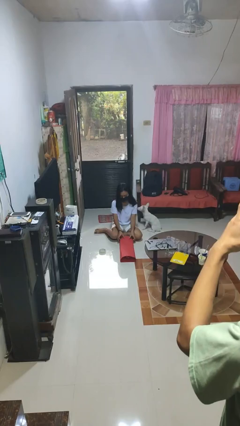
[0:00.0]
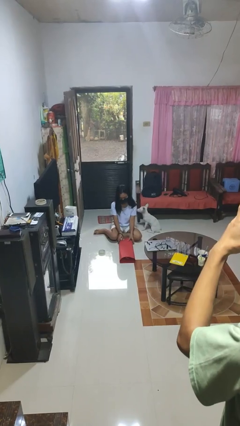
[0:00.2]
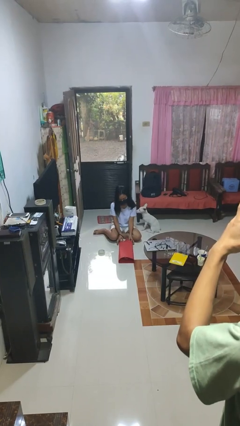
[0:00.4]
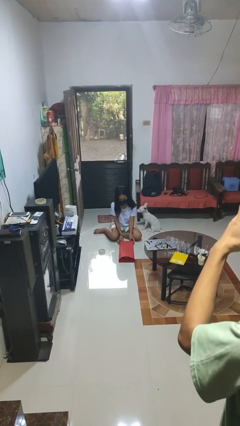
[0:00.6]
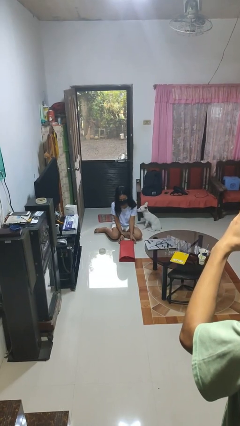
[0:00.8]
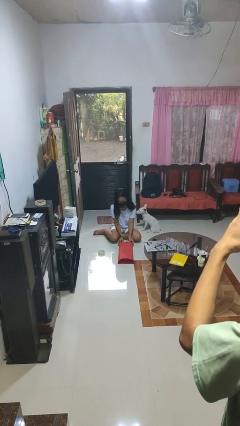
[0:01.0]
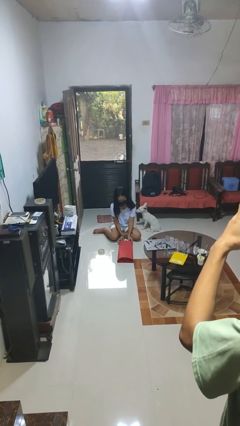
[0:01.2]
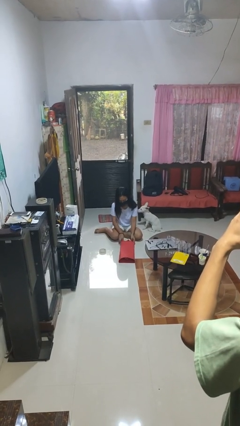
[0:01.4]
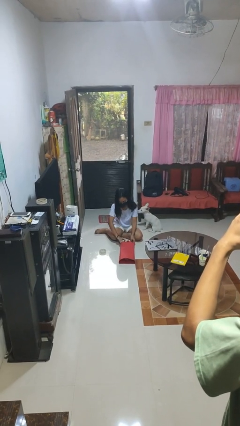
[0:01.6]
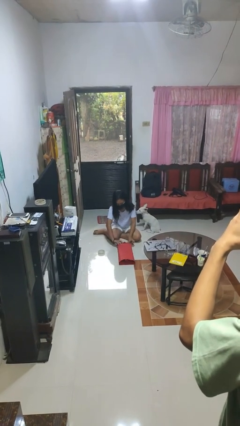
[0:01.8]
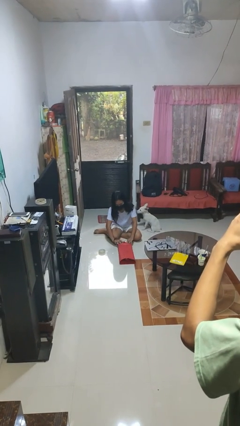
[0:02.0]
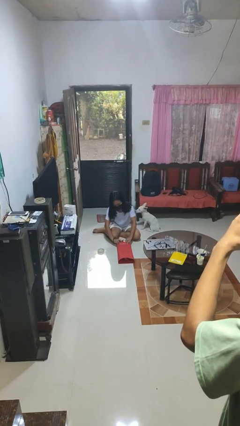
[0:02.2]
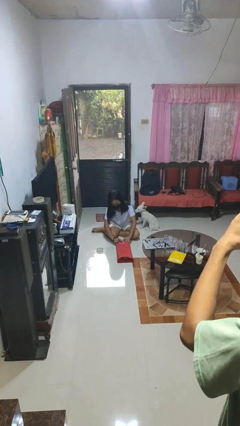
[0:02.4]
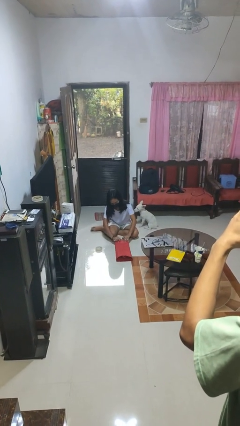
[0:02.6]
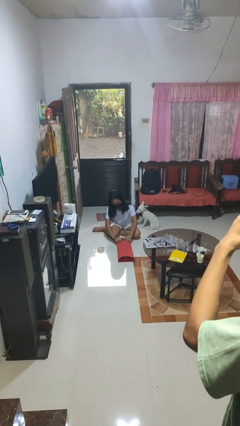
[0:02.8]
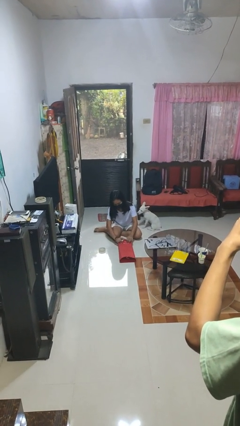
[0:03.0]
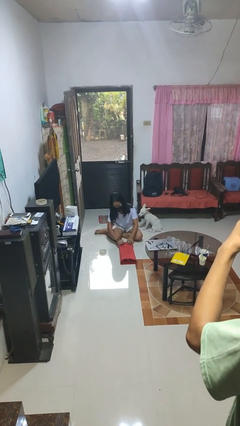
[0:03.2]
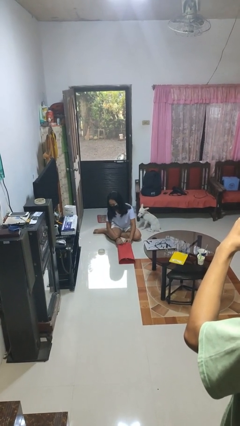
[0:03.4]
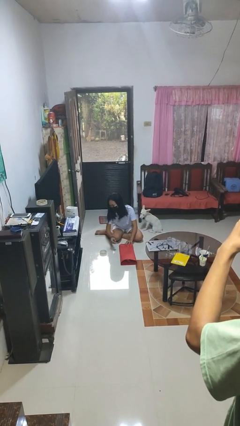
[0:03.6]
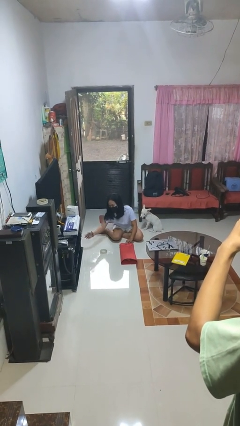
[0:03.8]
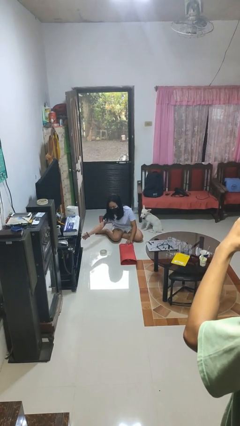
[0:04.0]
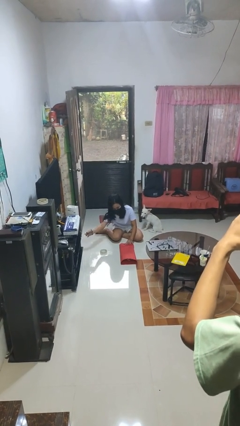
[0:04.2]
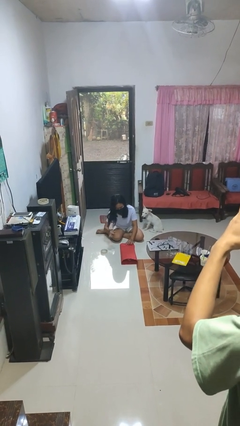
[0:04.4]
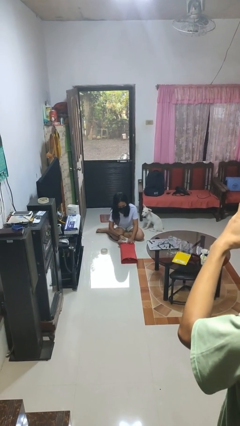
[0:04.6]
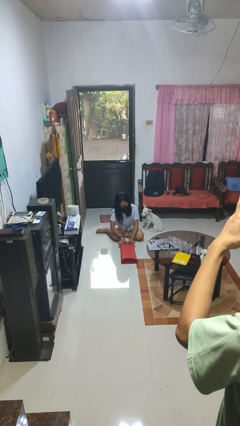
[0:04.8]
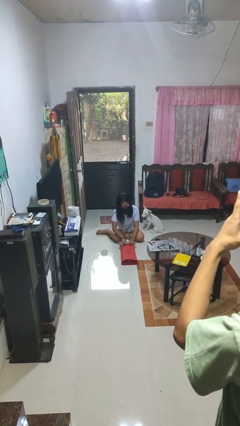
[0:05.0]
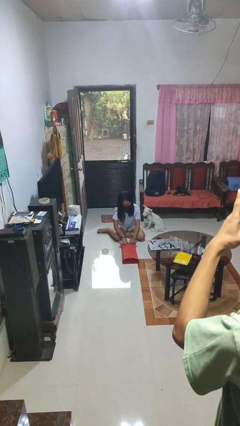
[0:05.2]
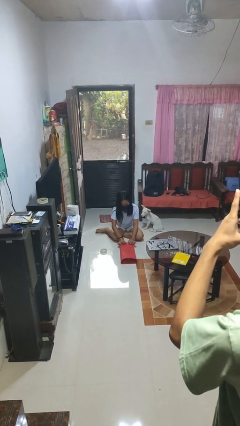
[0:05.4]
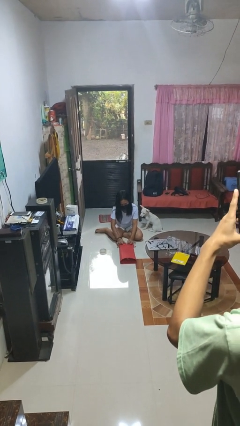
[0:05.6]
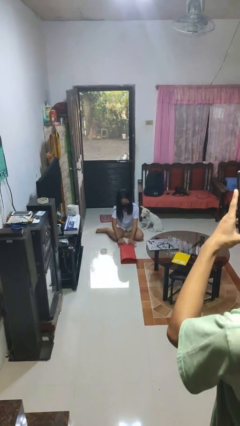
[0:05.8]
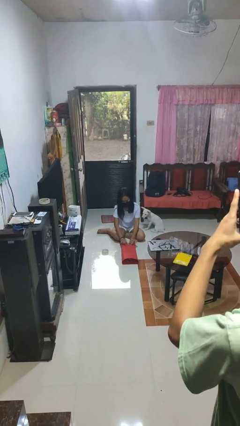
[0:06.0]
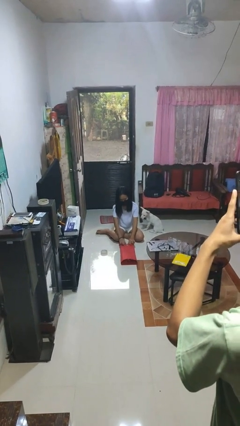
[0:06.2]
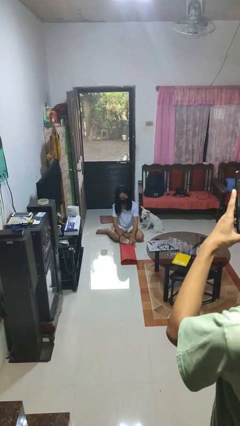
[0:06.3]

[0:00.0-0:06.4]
person wraps box

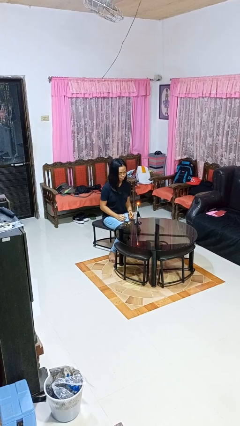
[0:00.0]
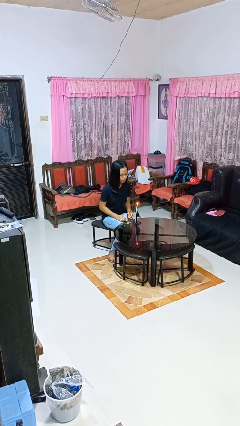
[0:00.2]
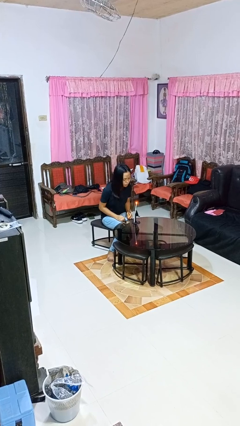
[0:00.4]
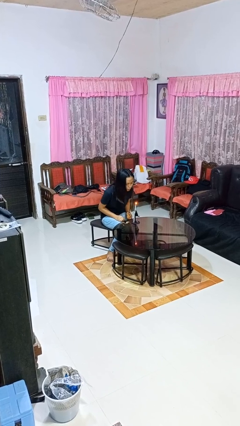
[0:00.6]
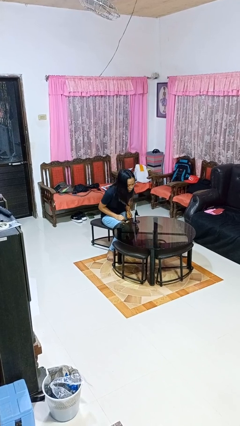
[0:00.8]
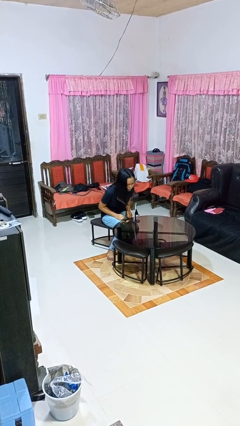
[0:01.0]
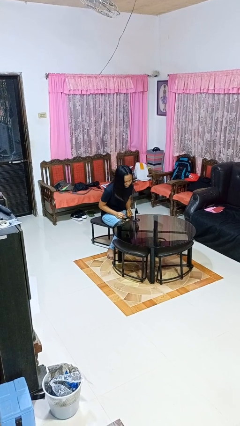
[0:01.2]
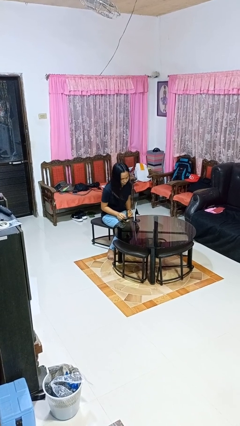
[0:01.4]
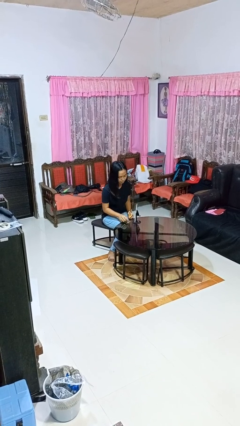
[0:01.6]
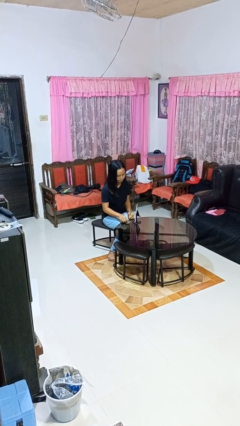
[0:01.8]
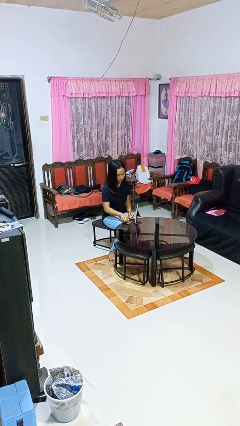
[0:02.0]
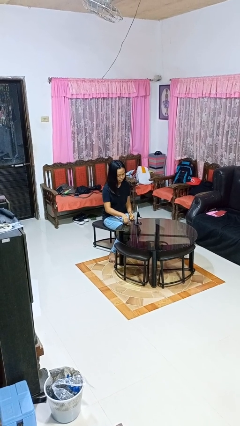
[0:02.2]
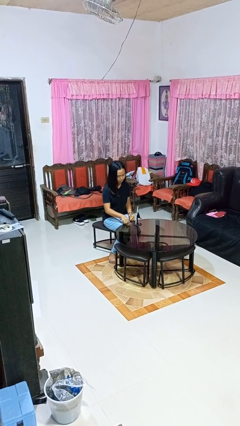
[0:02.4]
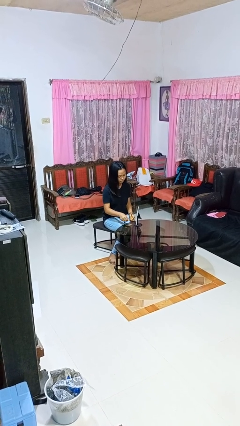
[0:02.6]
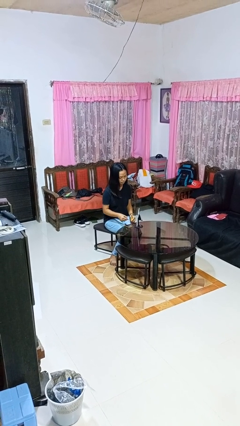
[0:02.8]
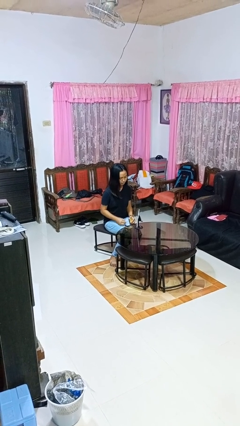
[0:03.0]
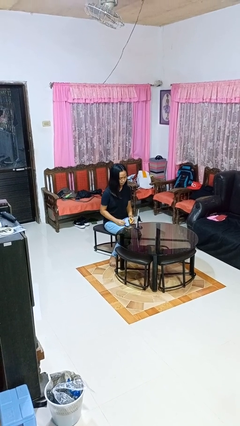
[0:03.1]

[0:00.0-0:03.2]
person extinguishes candle

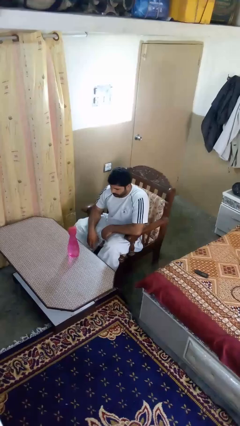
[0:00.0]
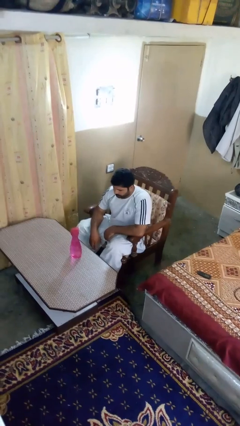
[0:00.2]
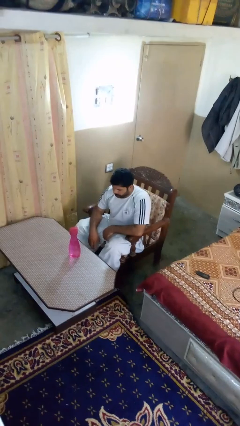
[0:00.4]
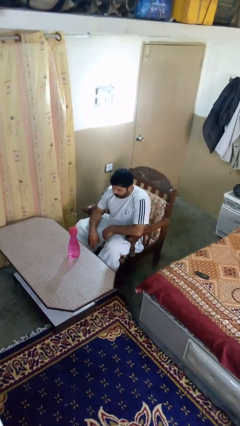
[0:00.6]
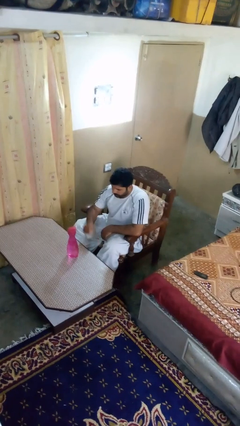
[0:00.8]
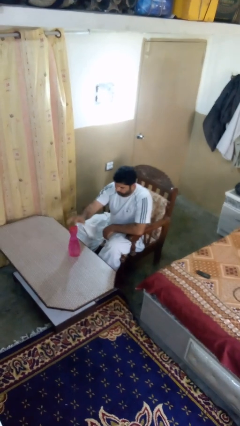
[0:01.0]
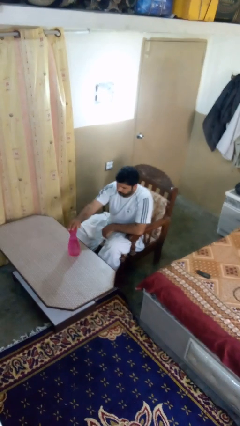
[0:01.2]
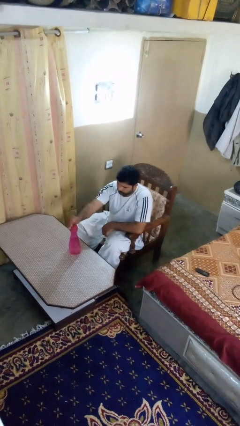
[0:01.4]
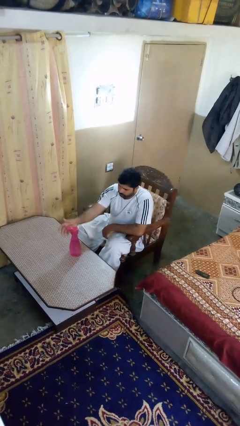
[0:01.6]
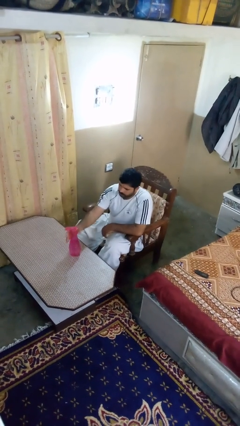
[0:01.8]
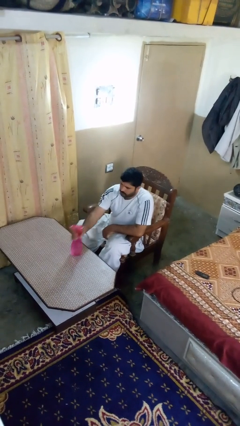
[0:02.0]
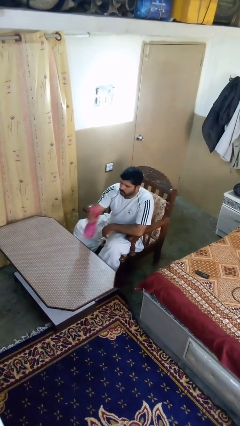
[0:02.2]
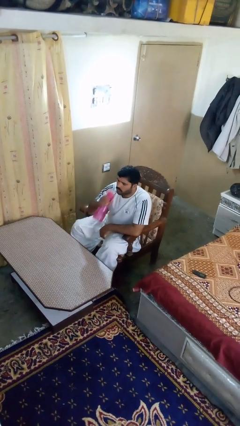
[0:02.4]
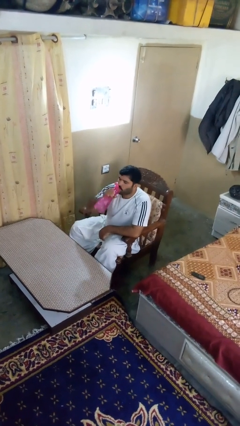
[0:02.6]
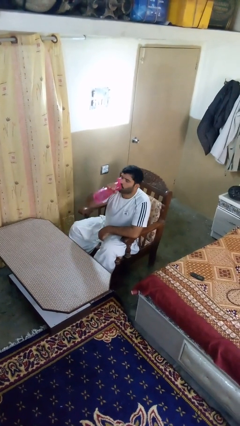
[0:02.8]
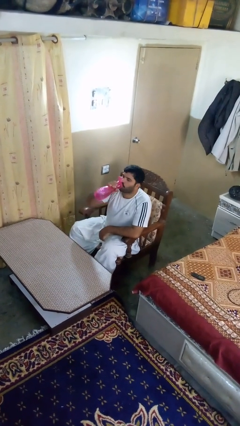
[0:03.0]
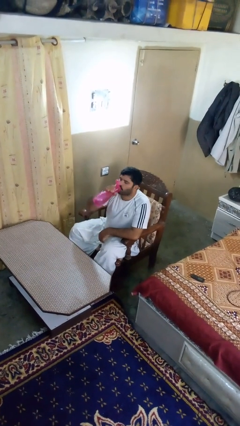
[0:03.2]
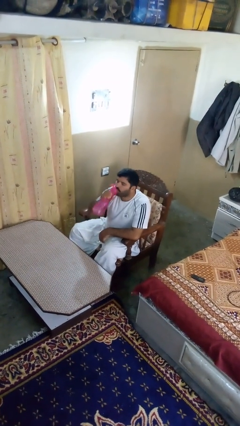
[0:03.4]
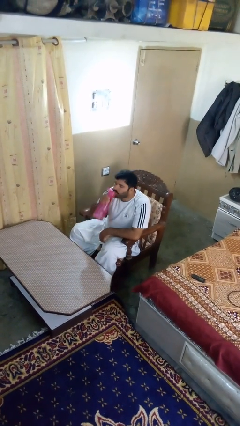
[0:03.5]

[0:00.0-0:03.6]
person drinks from bottle

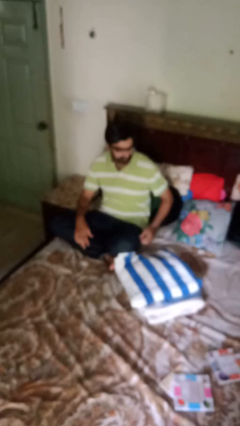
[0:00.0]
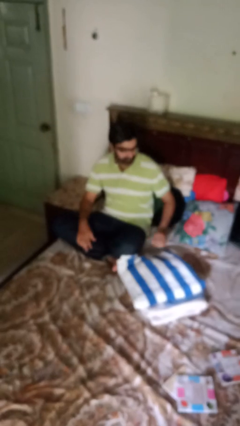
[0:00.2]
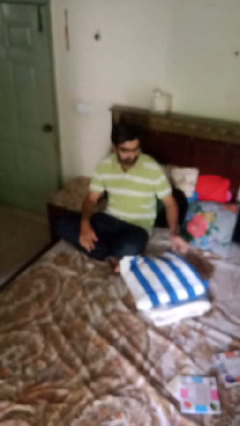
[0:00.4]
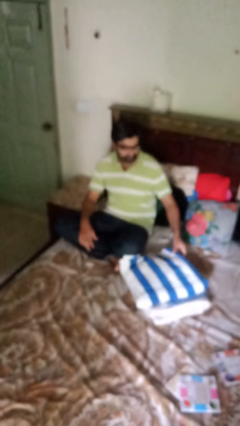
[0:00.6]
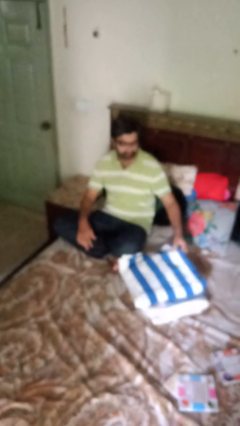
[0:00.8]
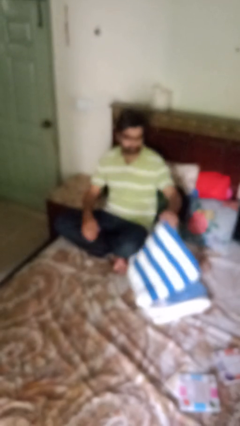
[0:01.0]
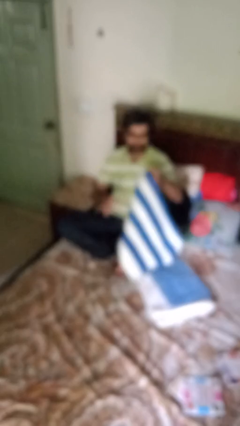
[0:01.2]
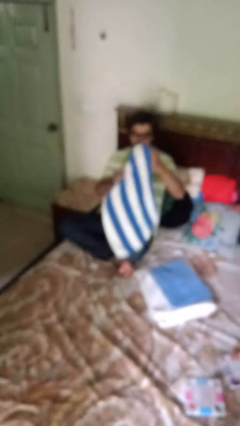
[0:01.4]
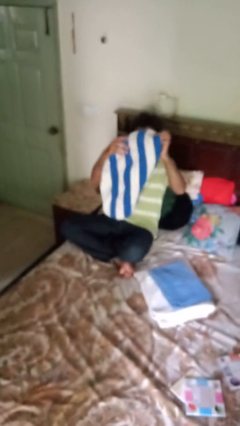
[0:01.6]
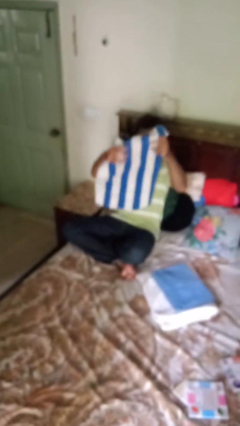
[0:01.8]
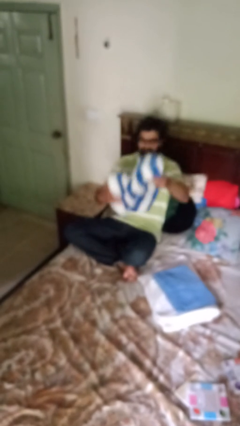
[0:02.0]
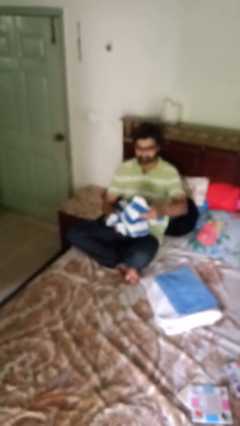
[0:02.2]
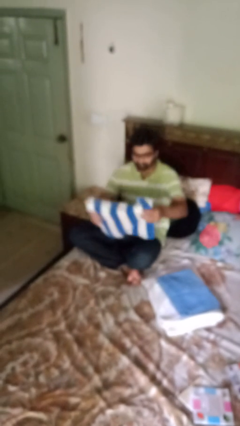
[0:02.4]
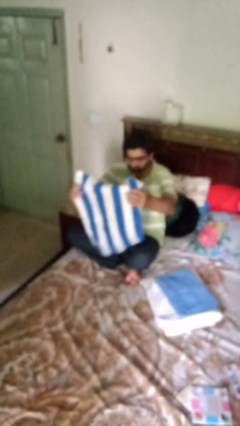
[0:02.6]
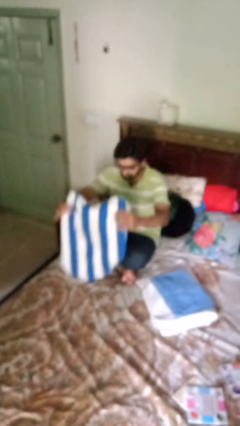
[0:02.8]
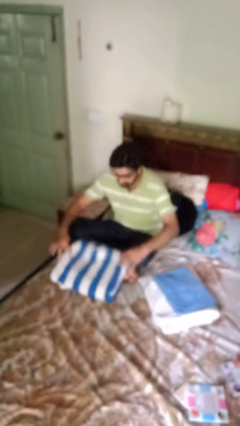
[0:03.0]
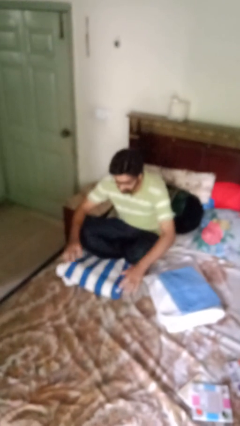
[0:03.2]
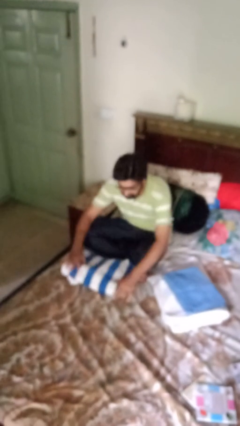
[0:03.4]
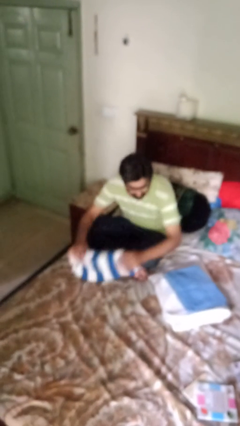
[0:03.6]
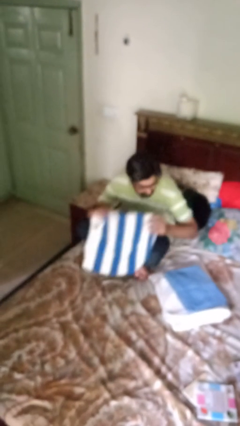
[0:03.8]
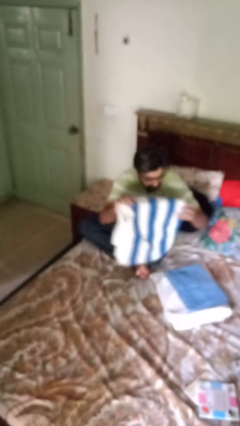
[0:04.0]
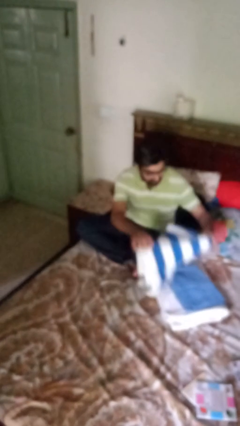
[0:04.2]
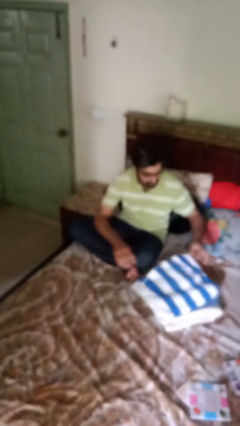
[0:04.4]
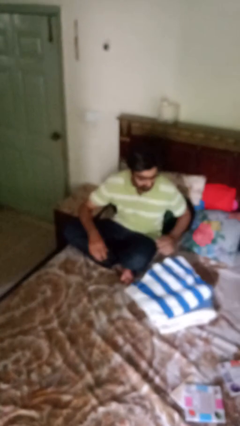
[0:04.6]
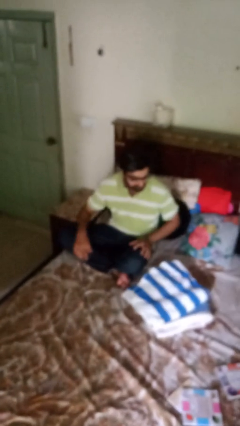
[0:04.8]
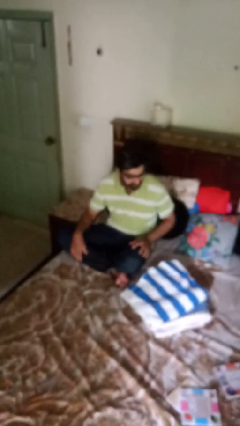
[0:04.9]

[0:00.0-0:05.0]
person folds towel
